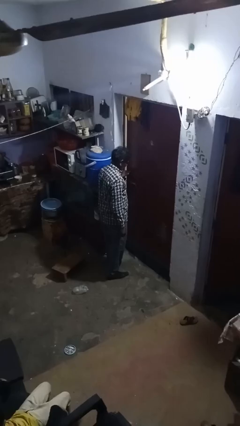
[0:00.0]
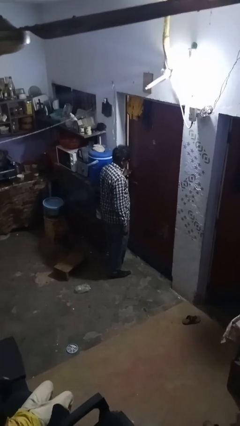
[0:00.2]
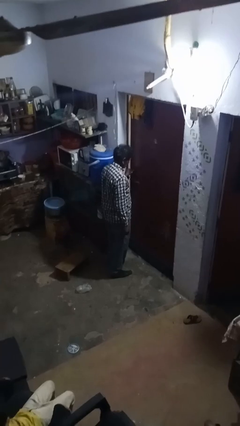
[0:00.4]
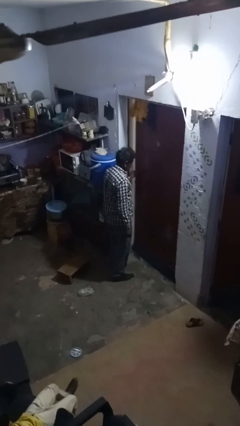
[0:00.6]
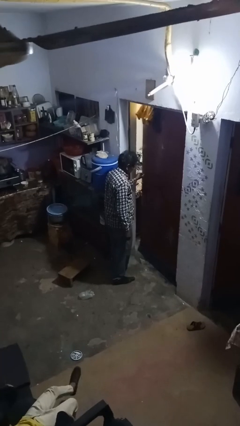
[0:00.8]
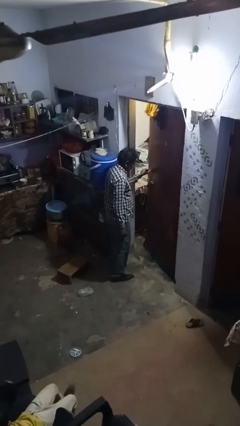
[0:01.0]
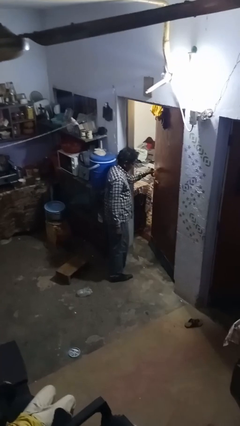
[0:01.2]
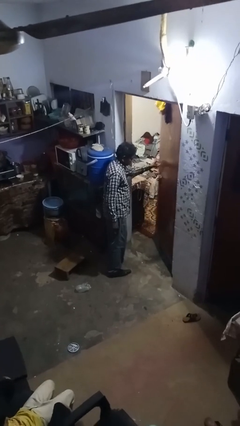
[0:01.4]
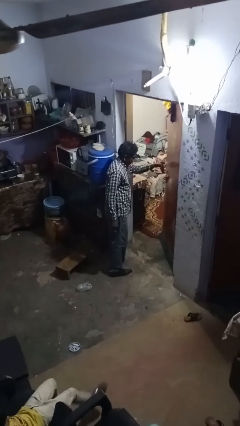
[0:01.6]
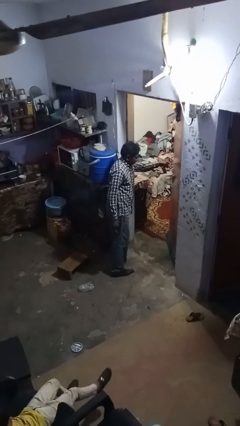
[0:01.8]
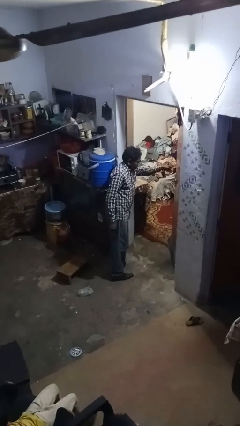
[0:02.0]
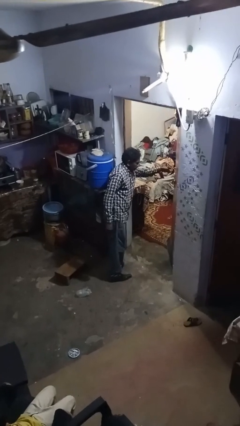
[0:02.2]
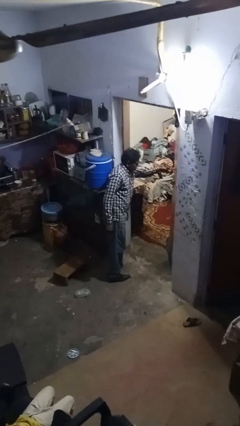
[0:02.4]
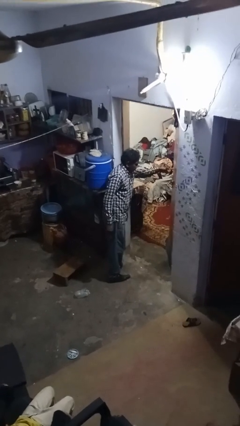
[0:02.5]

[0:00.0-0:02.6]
person opens facility door

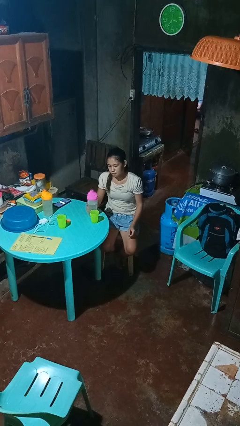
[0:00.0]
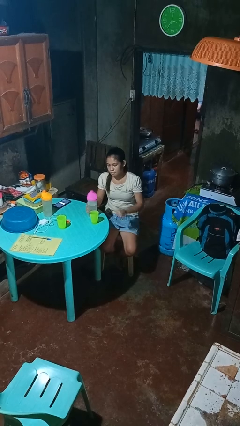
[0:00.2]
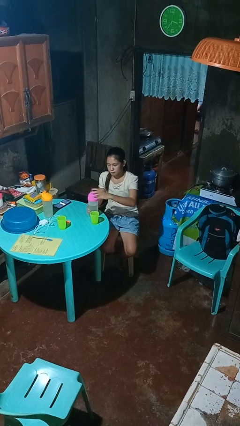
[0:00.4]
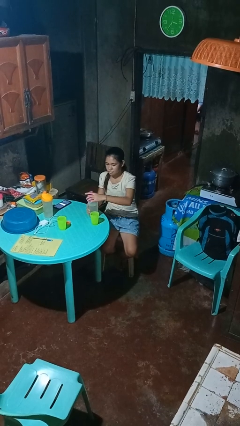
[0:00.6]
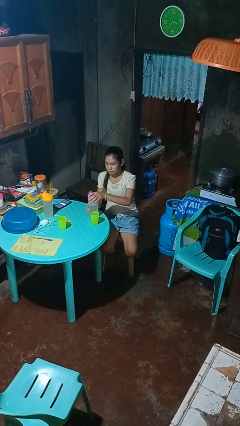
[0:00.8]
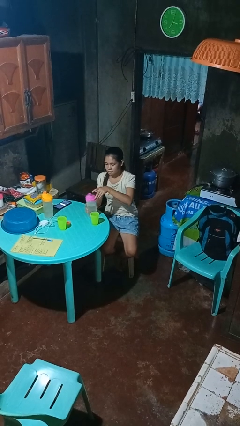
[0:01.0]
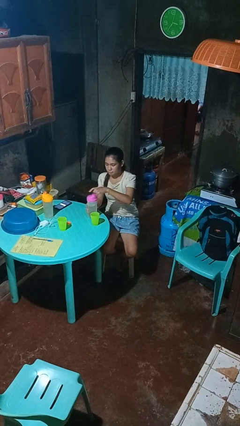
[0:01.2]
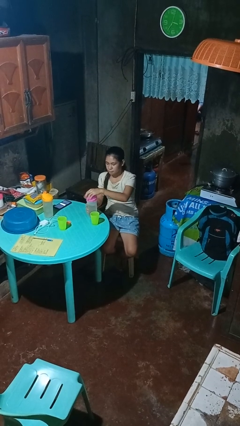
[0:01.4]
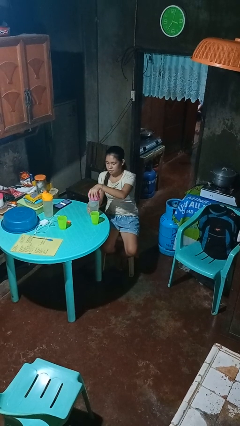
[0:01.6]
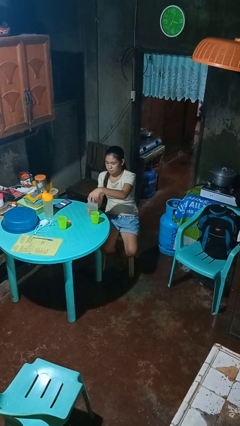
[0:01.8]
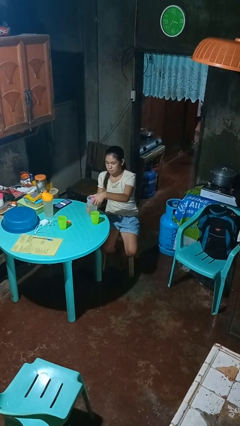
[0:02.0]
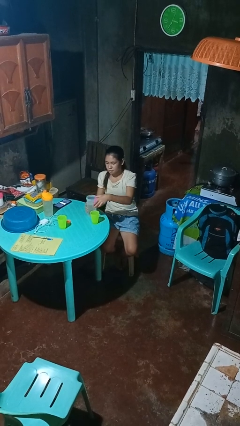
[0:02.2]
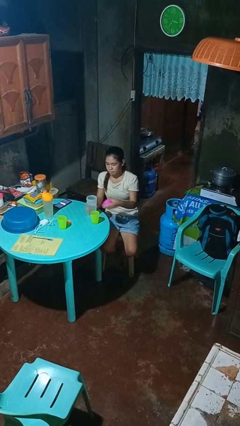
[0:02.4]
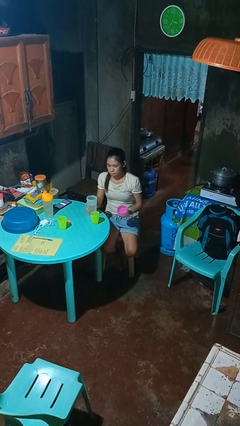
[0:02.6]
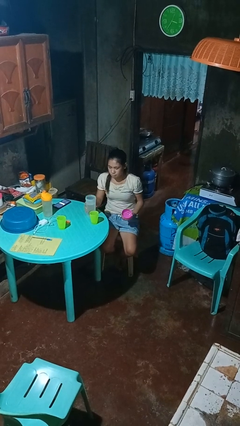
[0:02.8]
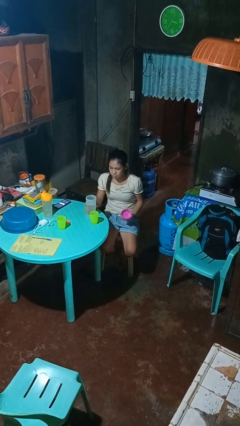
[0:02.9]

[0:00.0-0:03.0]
person unscrews lid from bottle

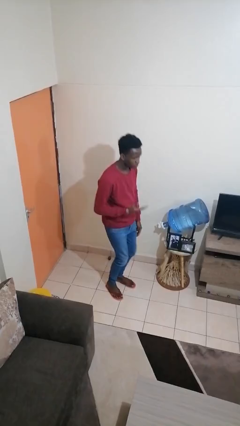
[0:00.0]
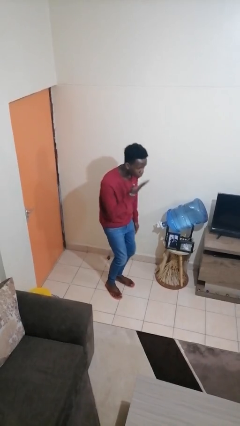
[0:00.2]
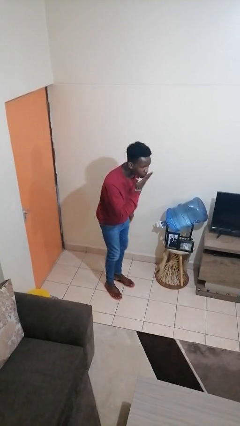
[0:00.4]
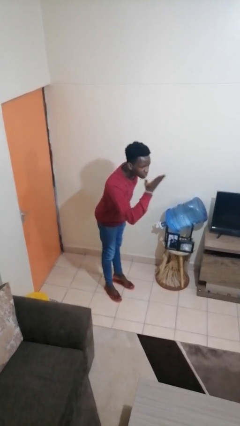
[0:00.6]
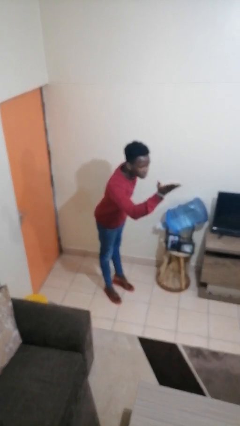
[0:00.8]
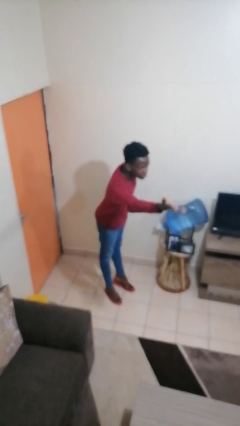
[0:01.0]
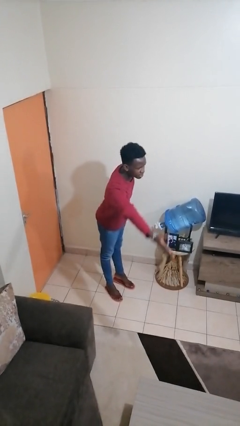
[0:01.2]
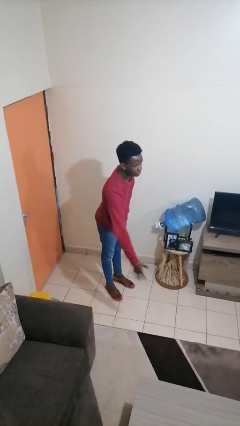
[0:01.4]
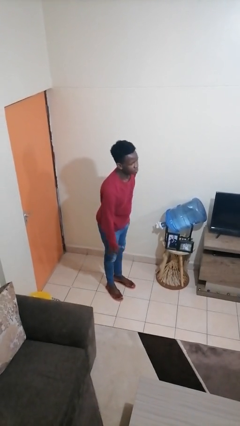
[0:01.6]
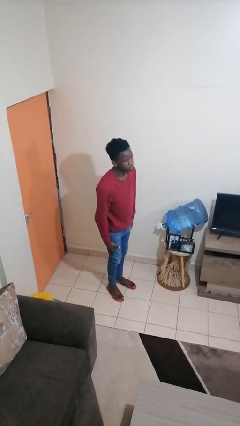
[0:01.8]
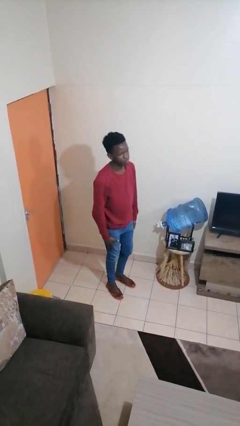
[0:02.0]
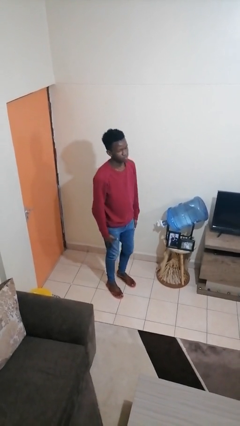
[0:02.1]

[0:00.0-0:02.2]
person gestures blow kiss

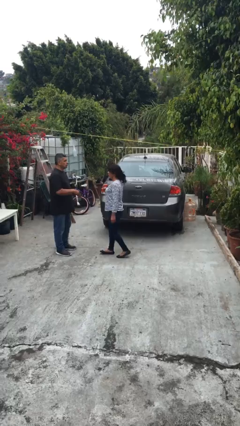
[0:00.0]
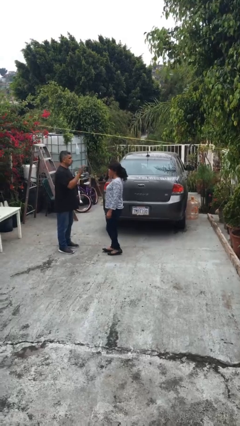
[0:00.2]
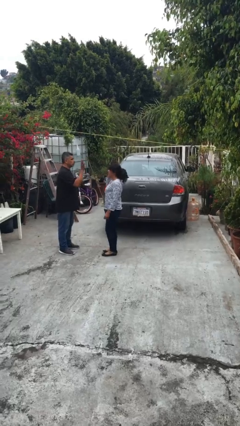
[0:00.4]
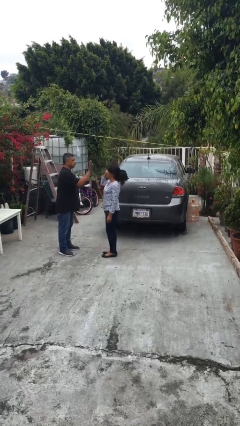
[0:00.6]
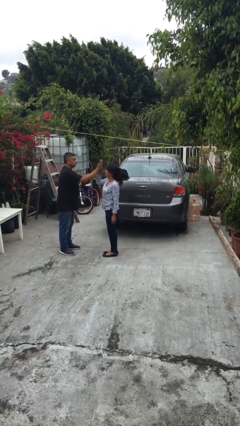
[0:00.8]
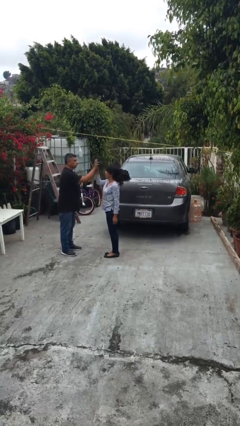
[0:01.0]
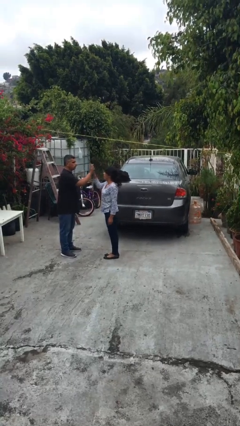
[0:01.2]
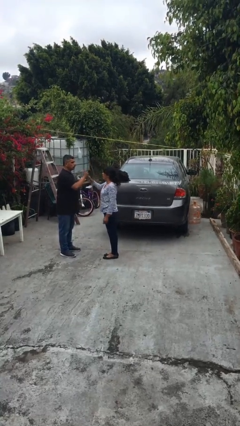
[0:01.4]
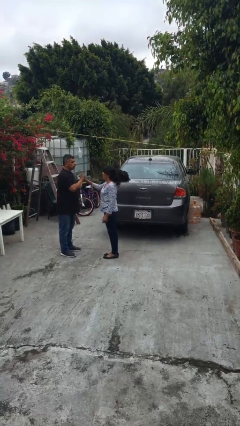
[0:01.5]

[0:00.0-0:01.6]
person highfives hand

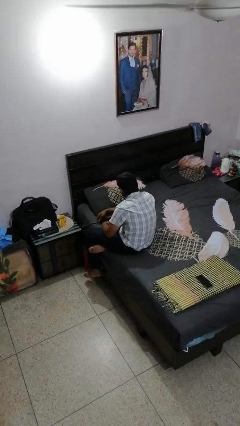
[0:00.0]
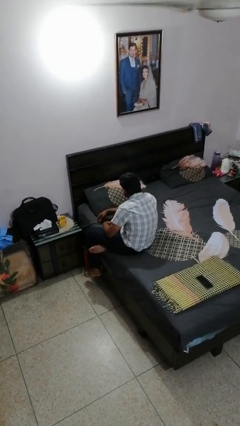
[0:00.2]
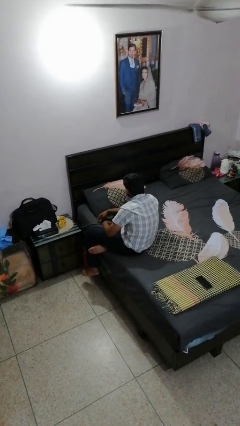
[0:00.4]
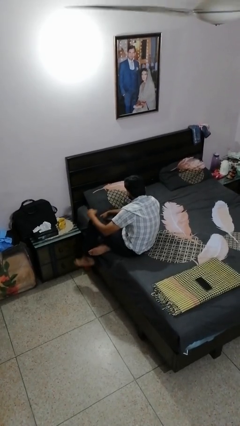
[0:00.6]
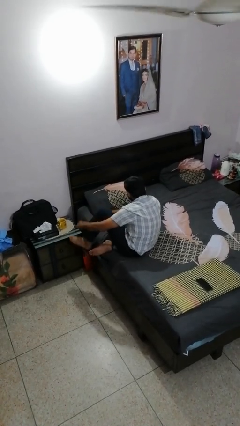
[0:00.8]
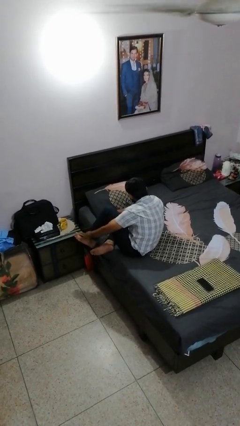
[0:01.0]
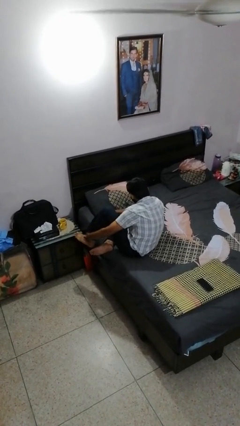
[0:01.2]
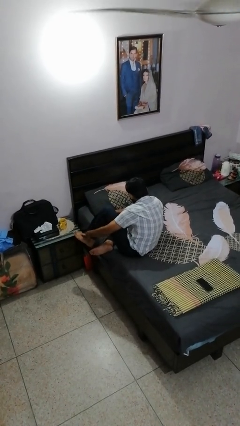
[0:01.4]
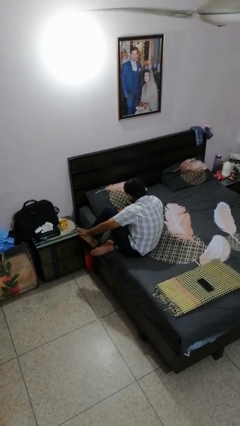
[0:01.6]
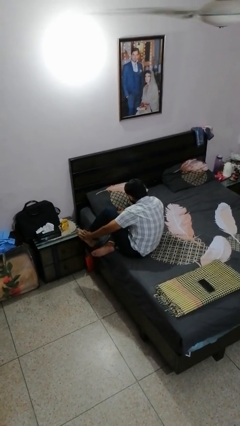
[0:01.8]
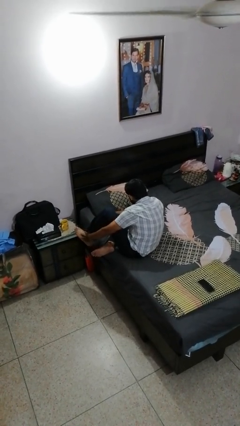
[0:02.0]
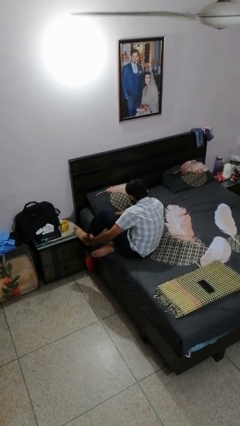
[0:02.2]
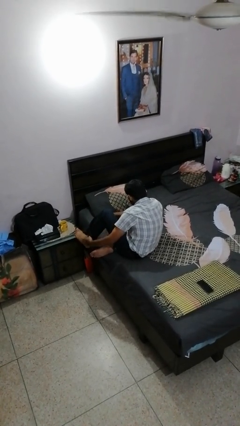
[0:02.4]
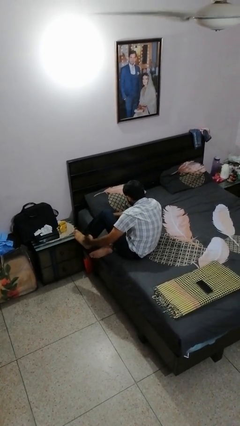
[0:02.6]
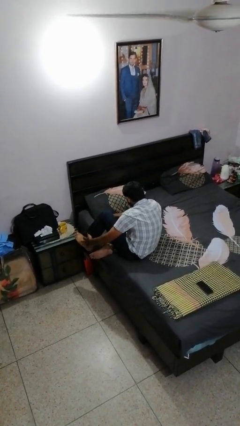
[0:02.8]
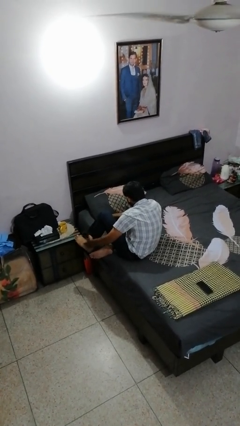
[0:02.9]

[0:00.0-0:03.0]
person rubs foot

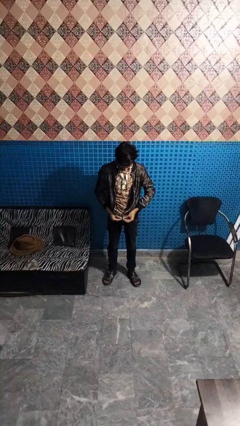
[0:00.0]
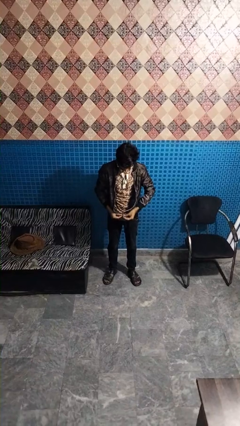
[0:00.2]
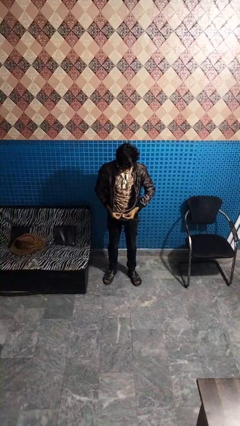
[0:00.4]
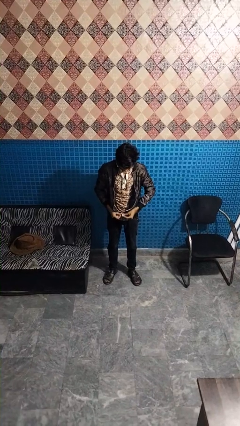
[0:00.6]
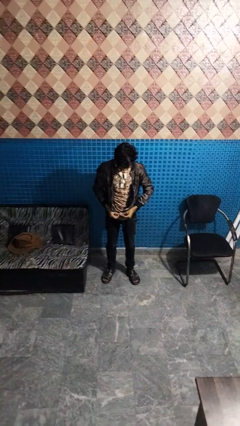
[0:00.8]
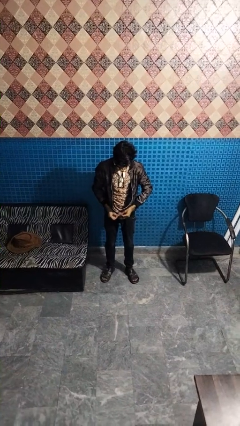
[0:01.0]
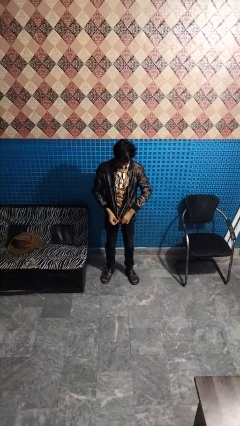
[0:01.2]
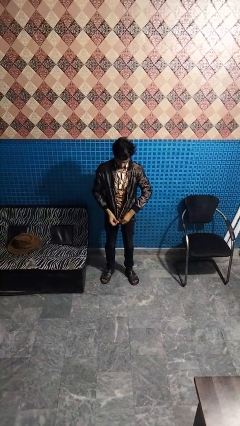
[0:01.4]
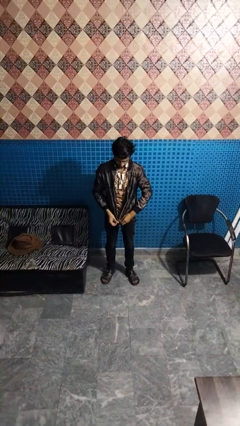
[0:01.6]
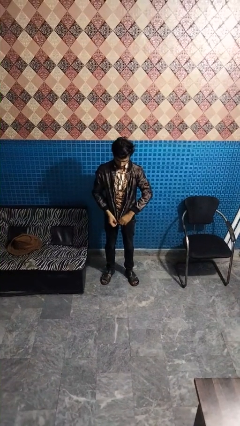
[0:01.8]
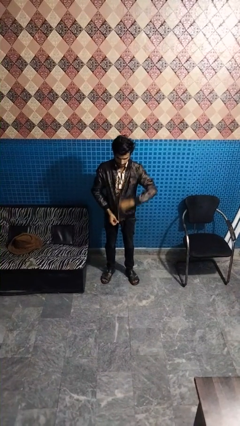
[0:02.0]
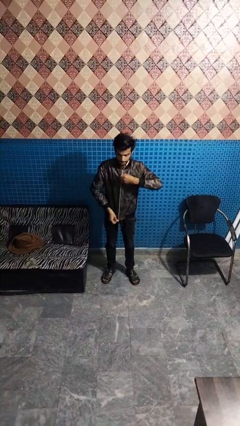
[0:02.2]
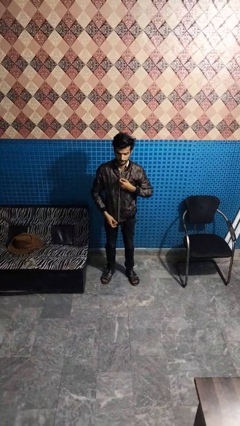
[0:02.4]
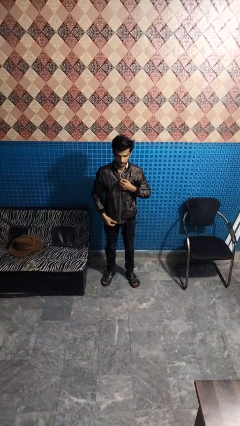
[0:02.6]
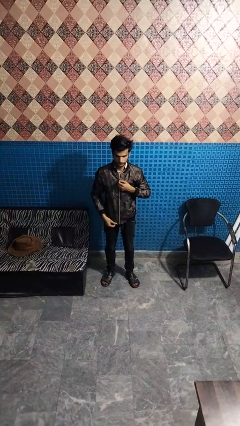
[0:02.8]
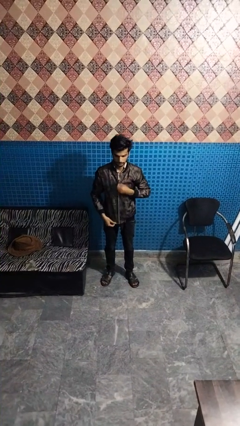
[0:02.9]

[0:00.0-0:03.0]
person zips up jacket

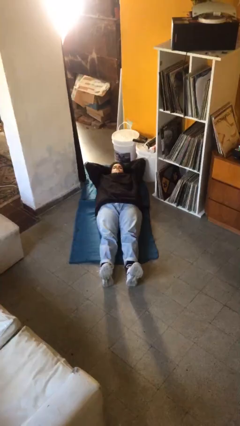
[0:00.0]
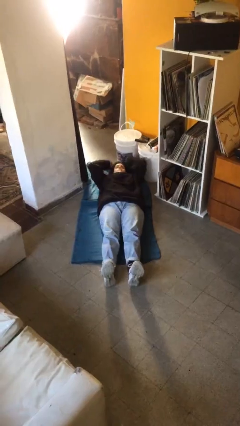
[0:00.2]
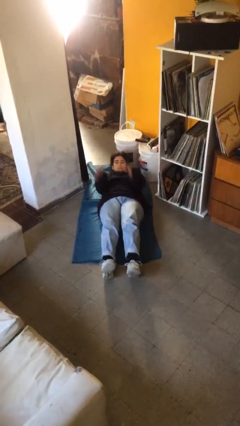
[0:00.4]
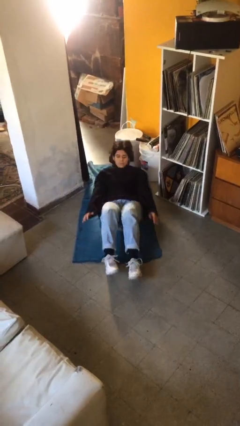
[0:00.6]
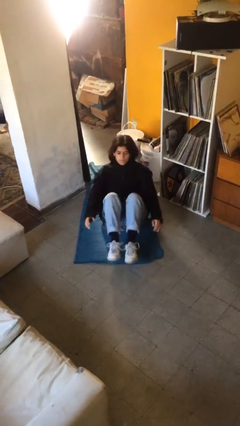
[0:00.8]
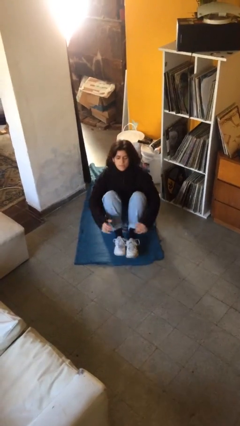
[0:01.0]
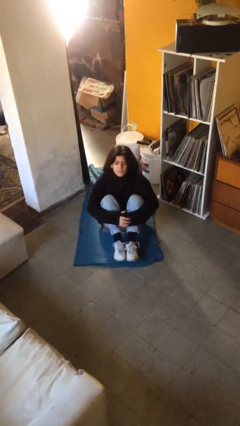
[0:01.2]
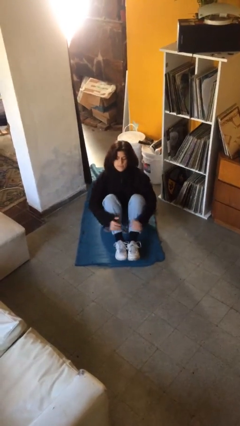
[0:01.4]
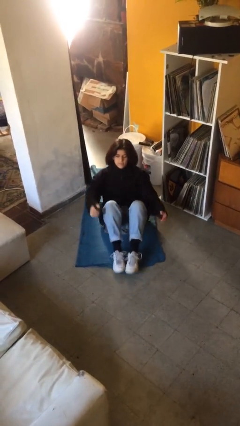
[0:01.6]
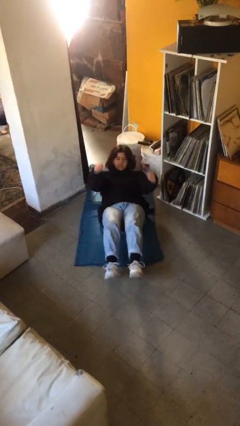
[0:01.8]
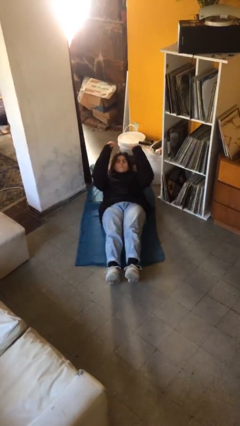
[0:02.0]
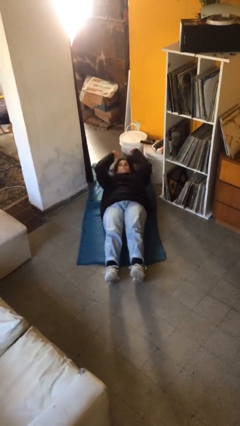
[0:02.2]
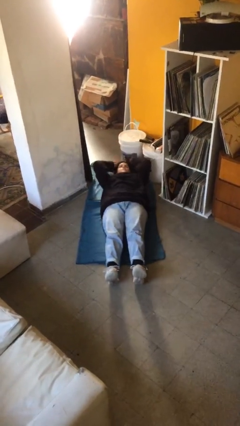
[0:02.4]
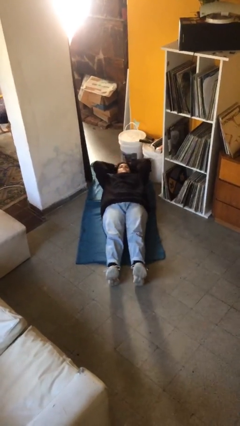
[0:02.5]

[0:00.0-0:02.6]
person exercises with situp
